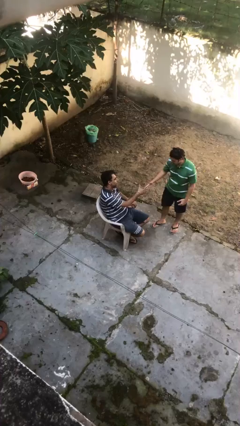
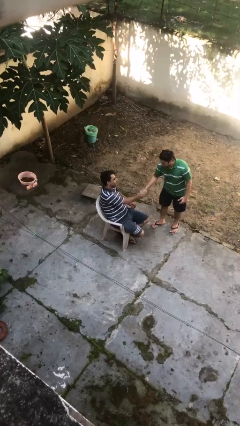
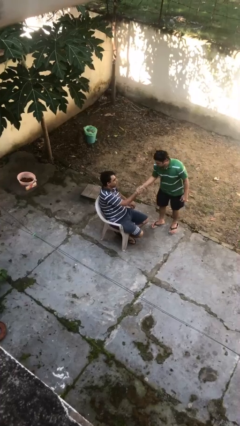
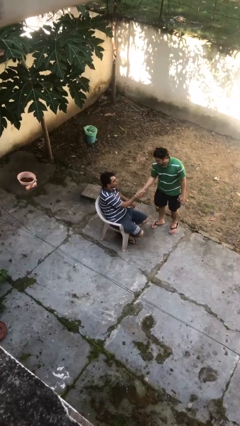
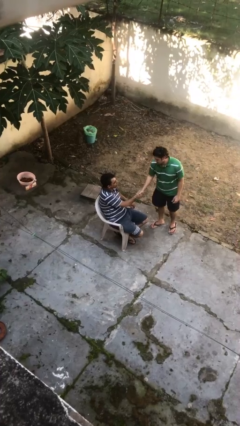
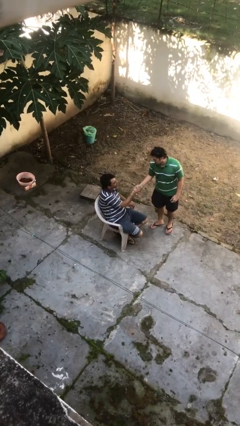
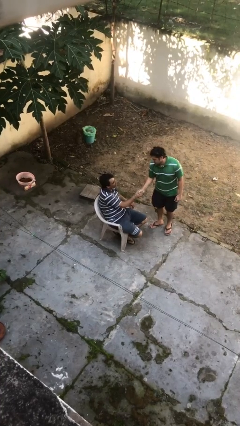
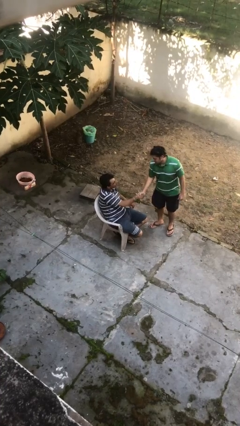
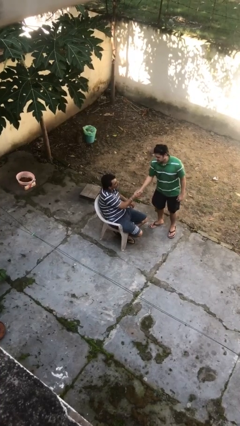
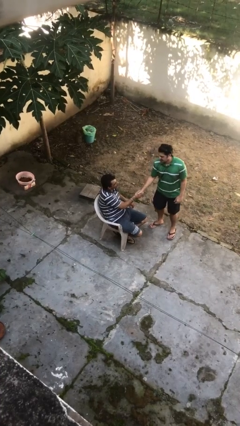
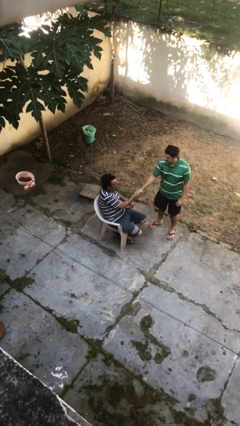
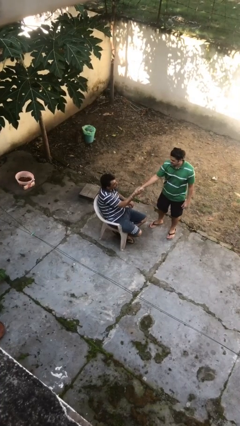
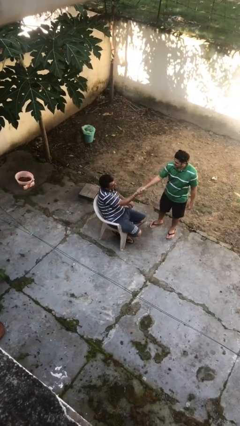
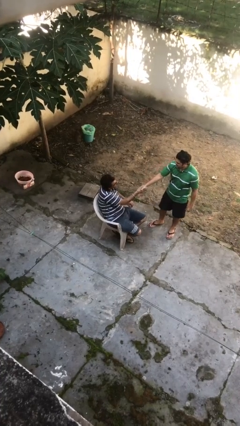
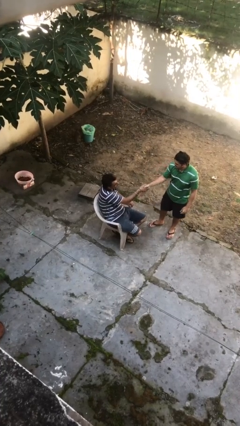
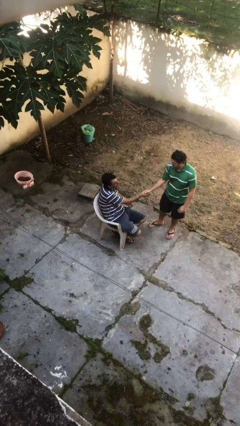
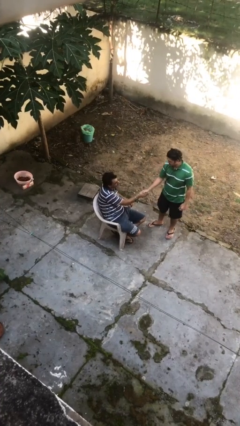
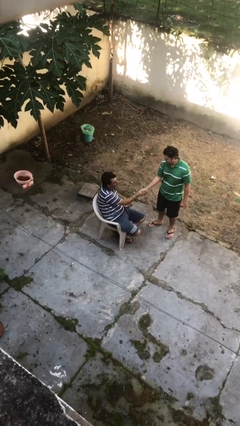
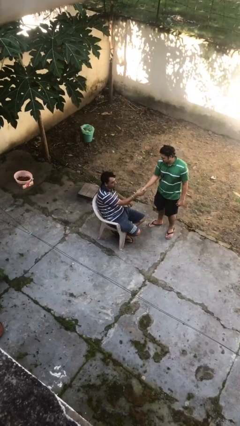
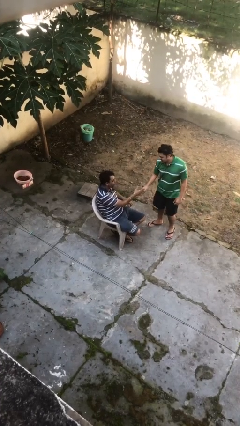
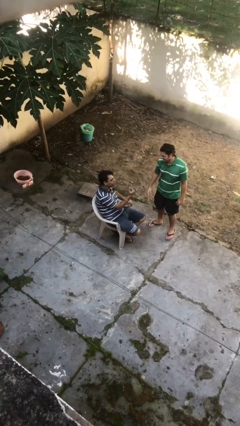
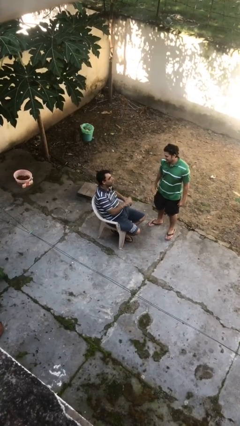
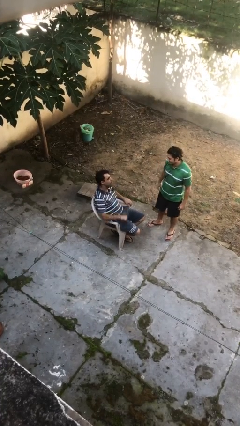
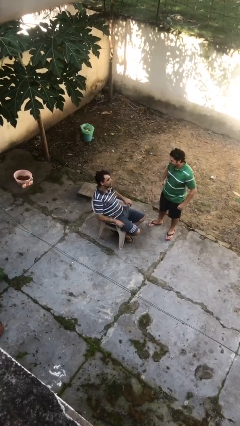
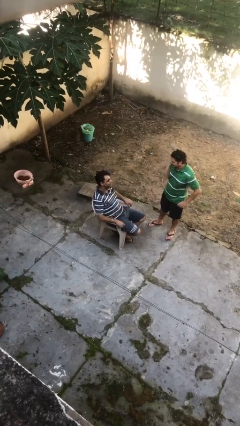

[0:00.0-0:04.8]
person shakes hand

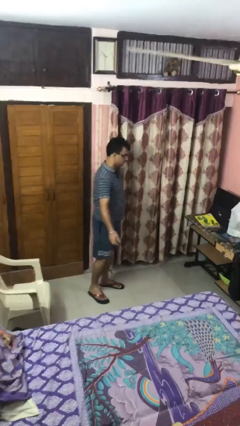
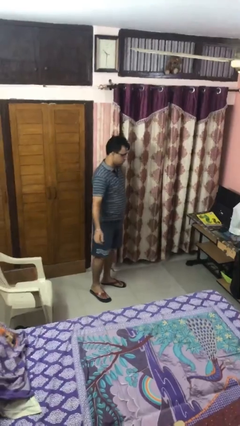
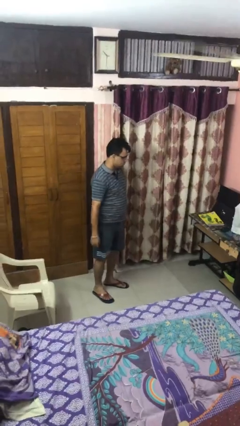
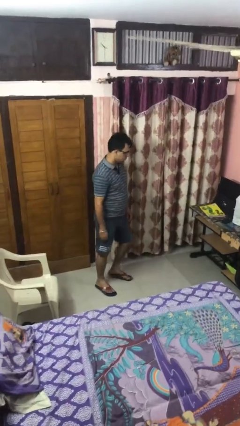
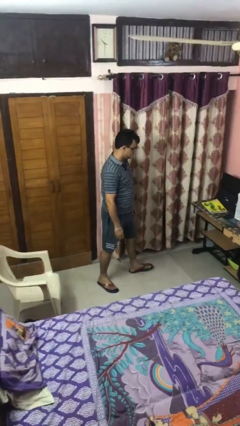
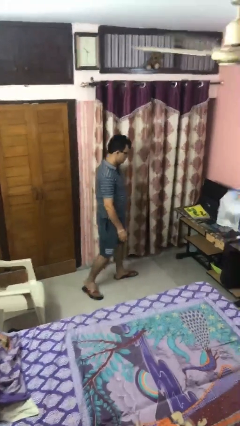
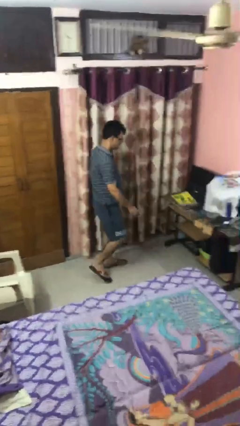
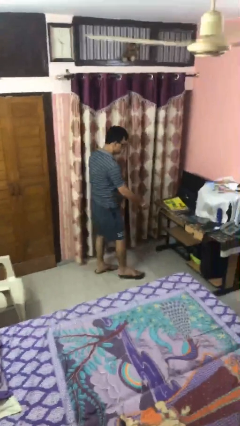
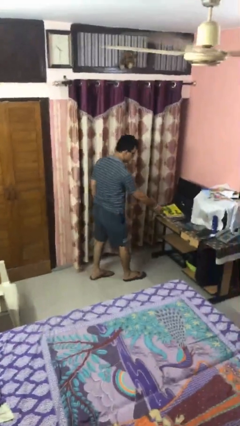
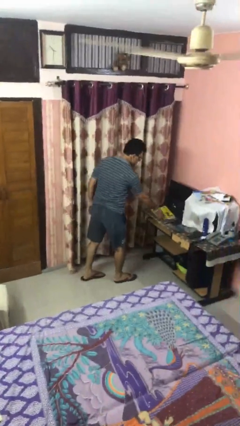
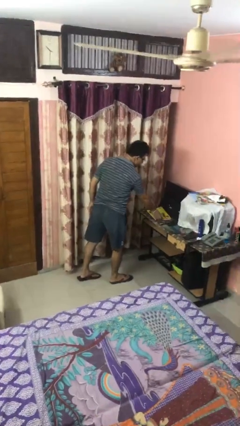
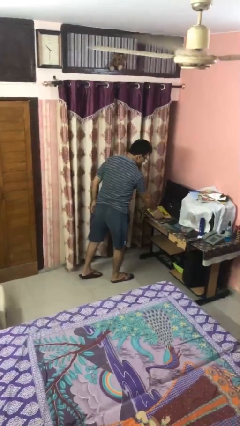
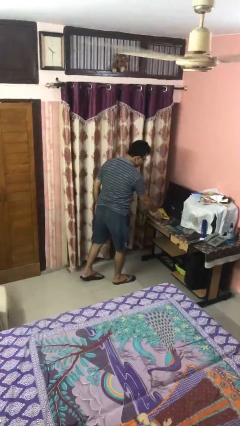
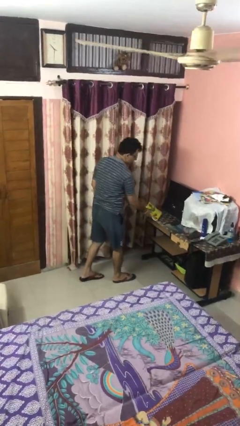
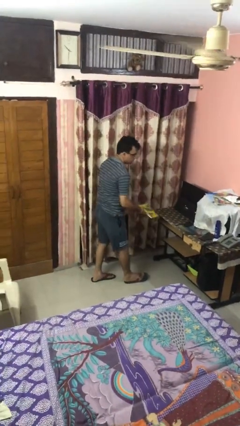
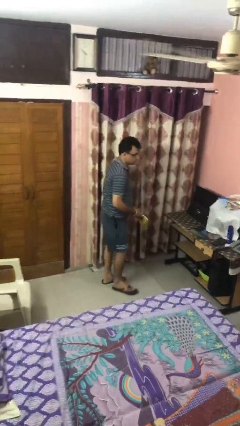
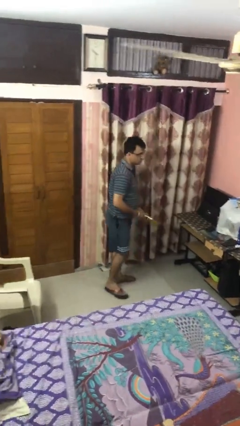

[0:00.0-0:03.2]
person picks up object from table

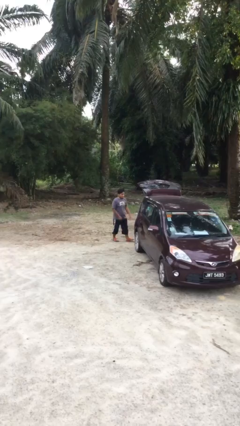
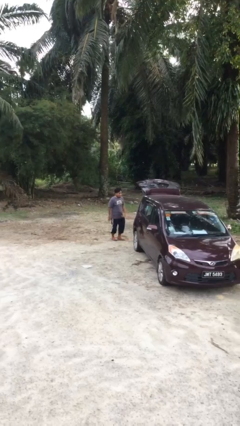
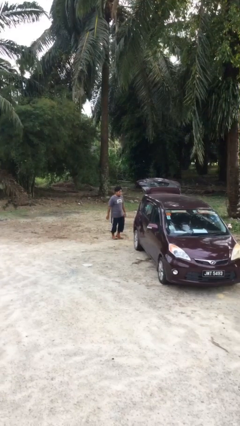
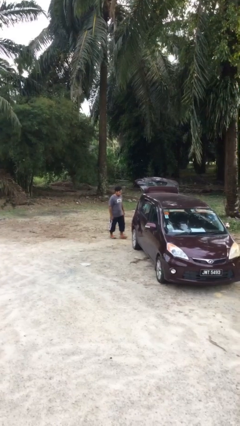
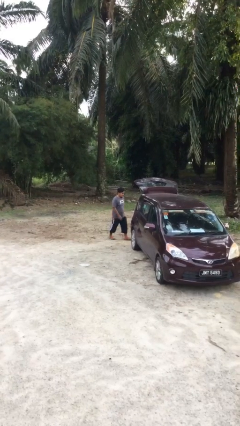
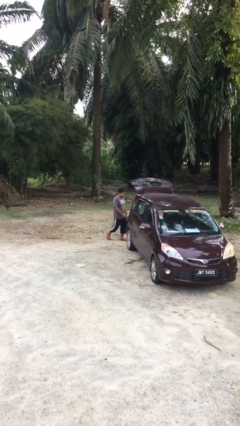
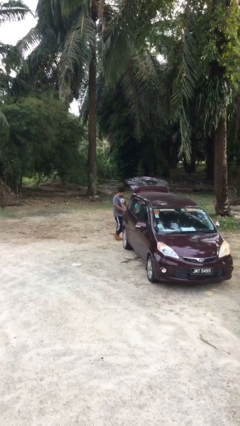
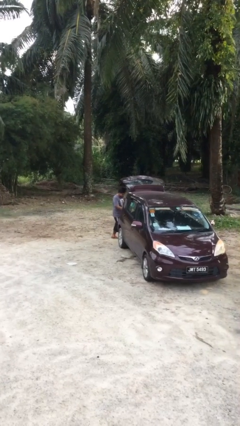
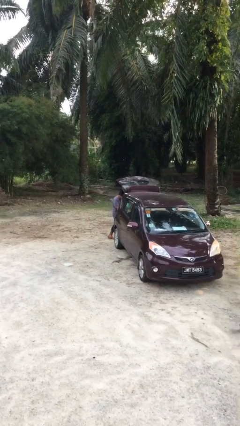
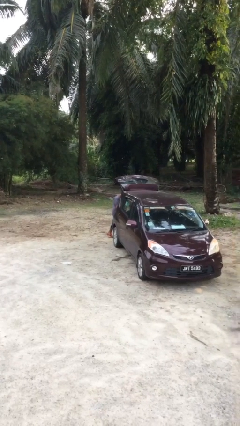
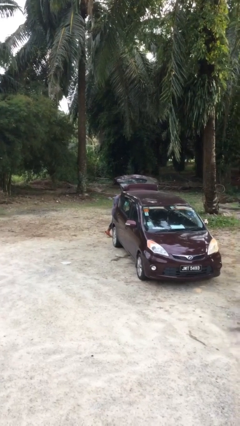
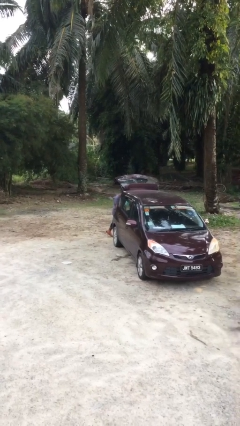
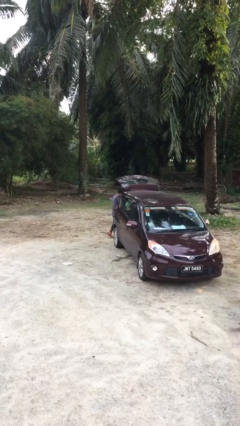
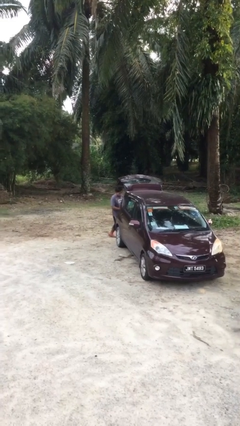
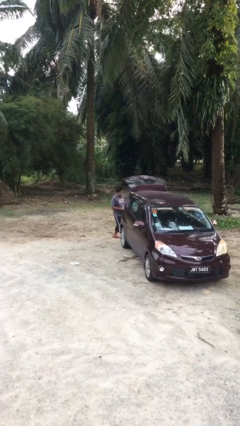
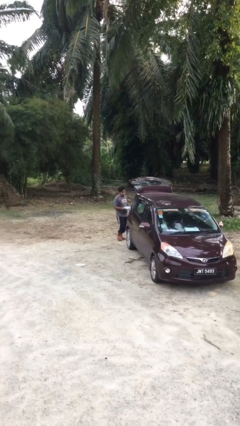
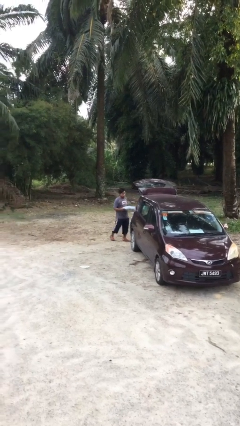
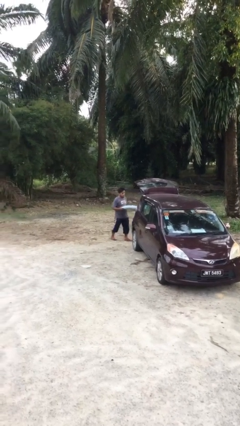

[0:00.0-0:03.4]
person unloads car

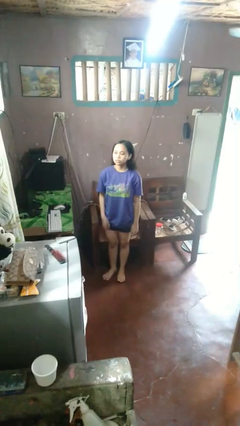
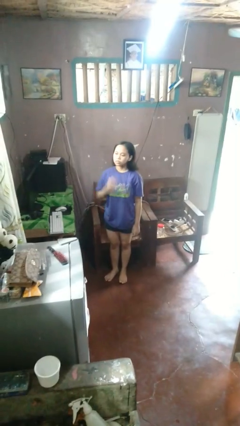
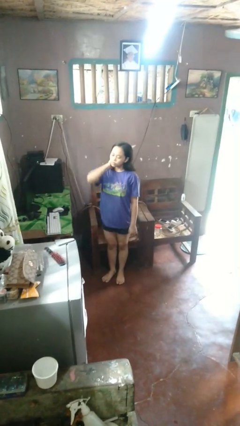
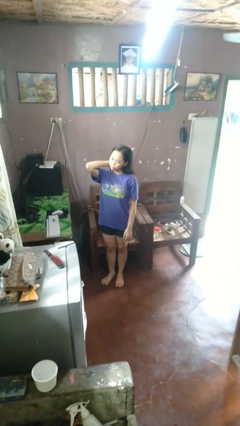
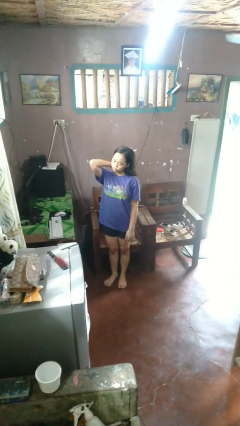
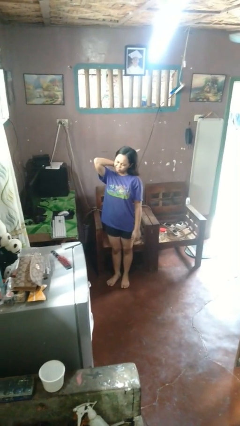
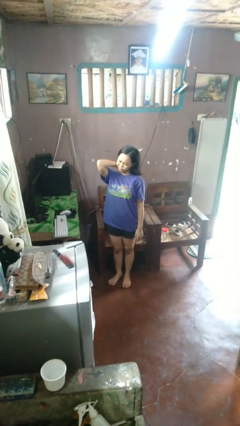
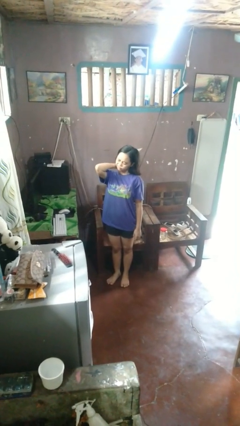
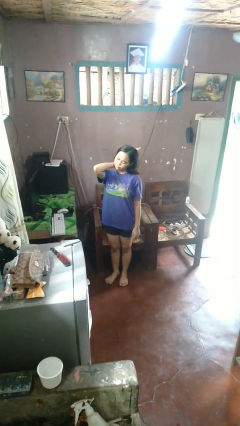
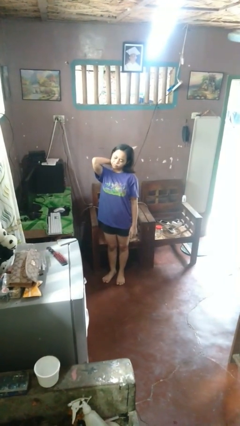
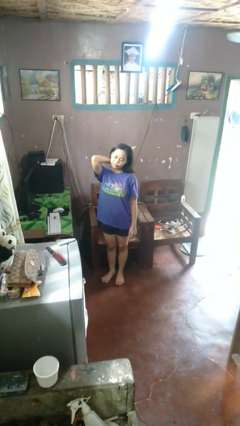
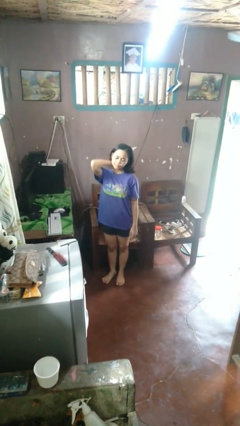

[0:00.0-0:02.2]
person rubs neck

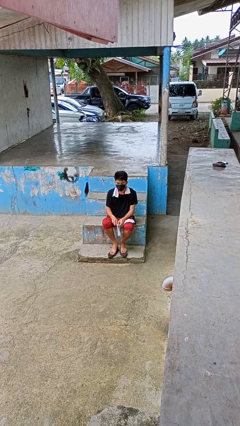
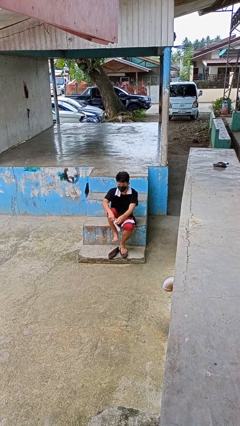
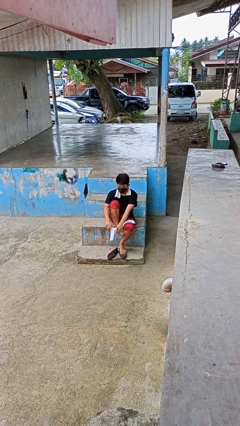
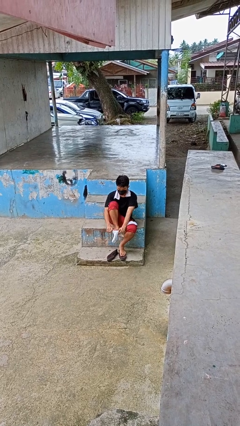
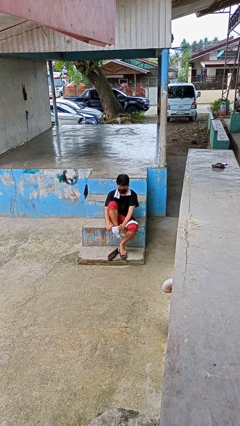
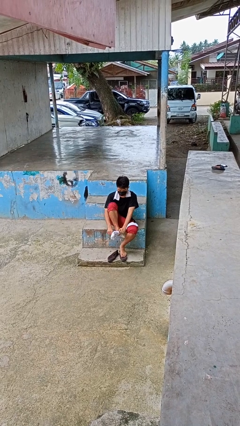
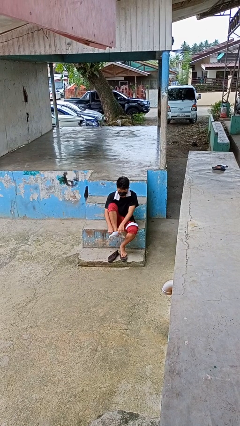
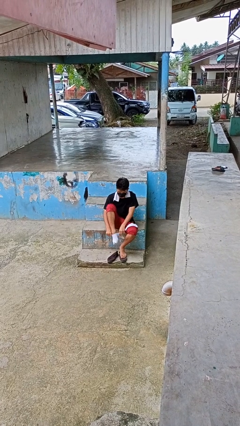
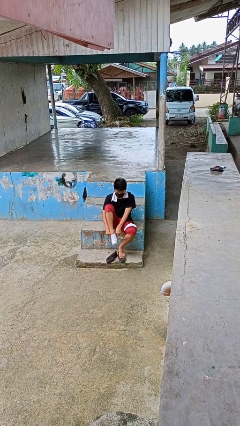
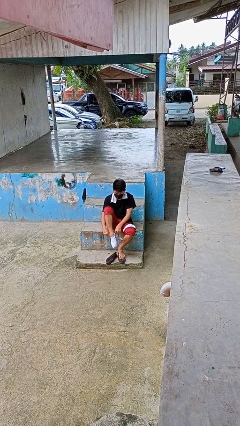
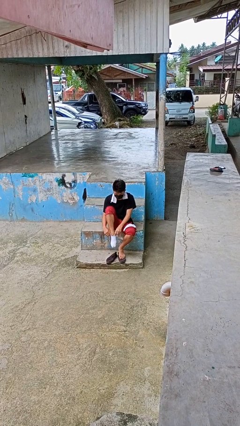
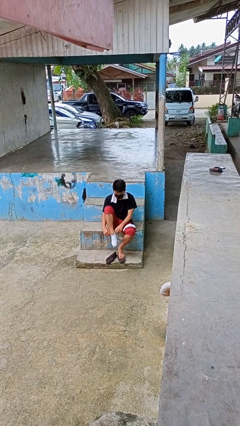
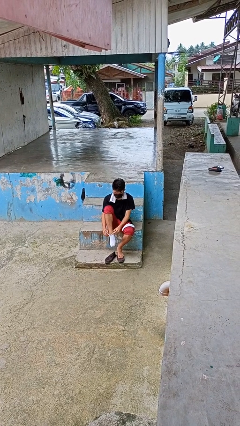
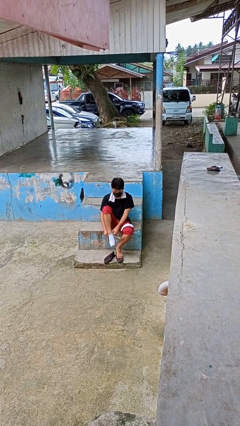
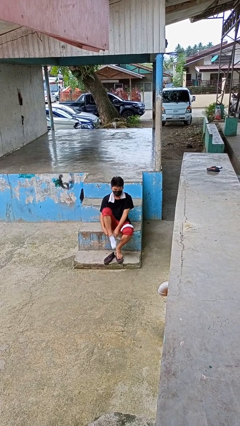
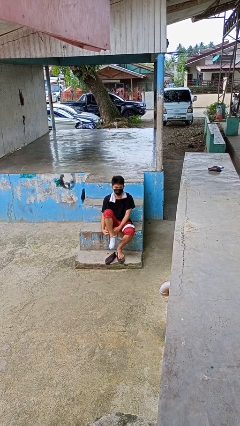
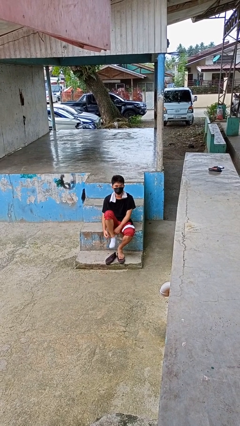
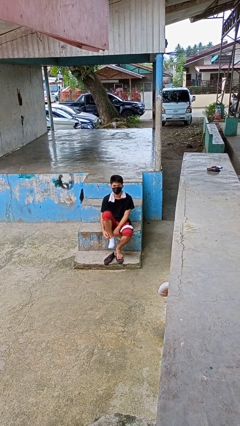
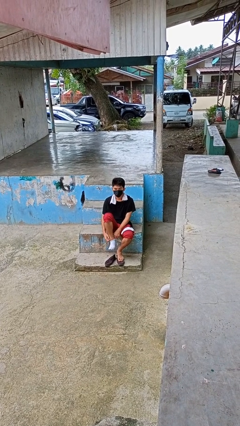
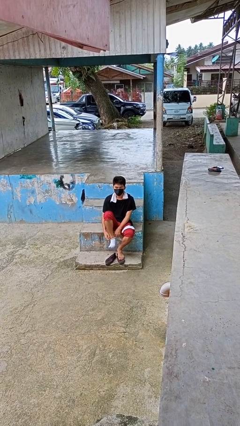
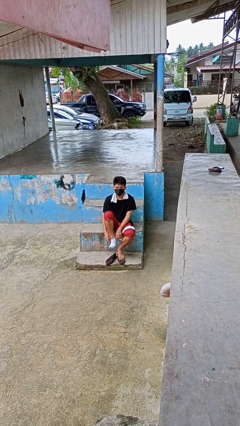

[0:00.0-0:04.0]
person puts on socks

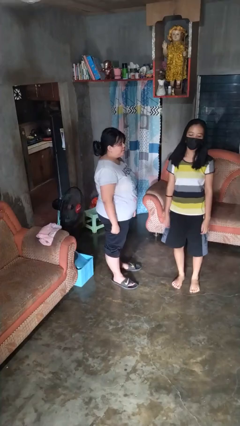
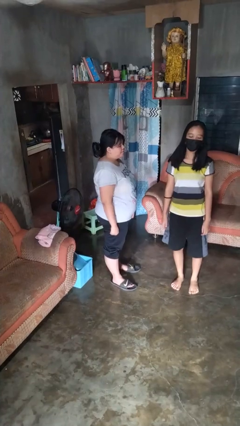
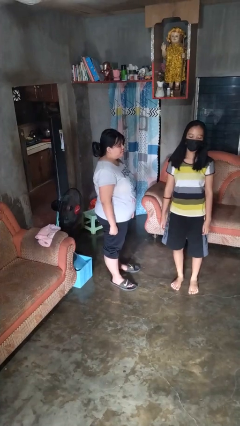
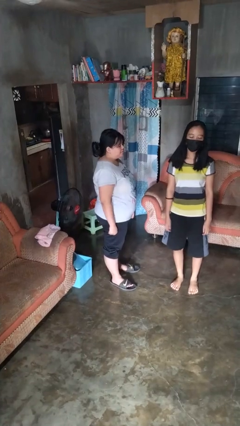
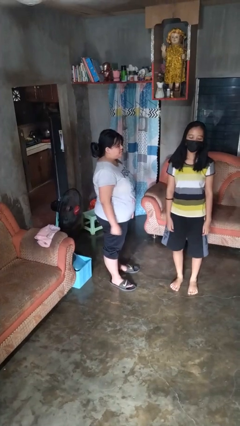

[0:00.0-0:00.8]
person grabs person by bicep
